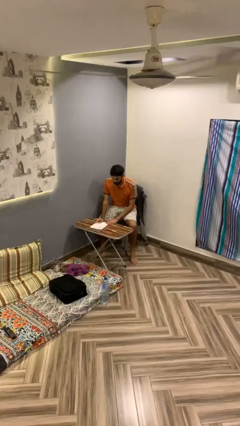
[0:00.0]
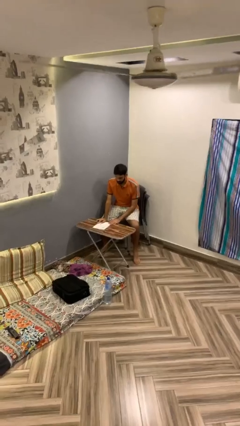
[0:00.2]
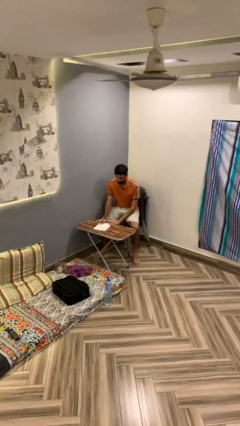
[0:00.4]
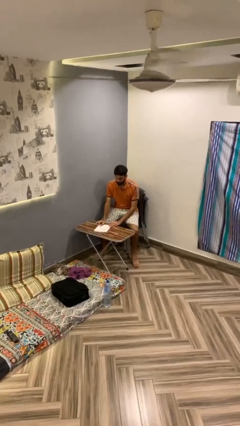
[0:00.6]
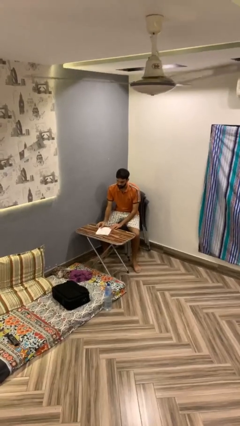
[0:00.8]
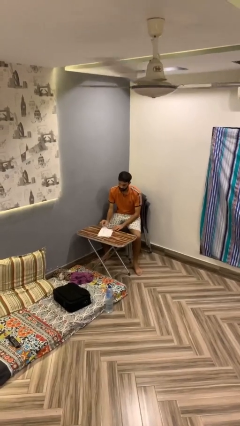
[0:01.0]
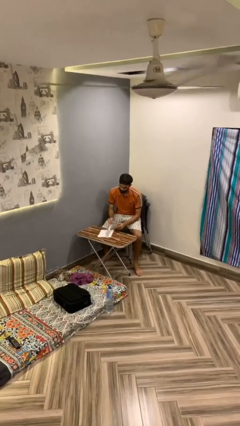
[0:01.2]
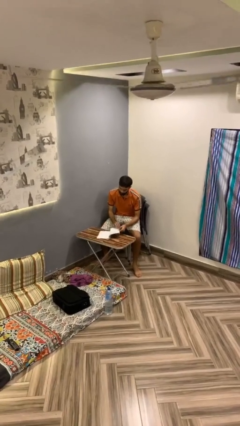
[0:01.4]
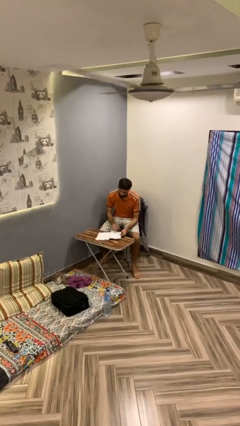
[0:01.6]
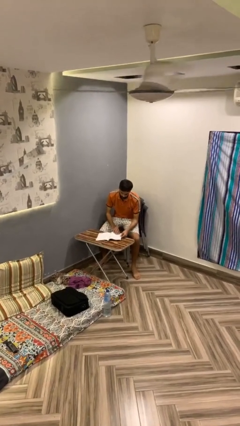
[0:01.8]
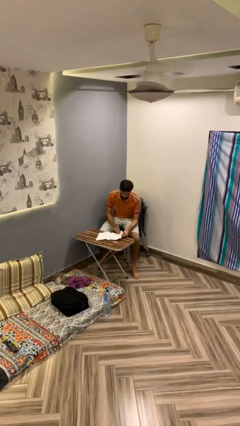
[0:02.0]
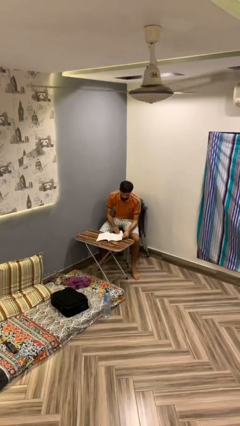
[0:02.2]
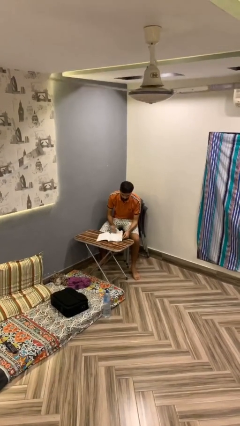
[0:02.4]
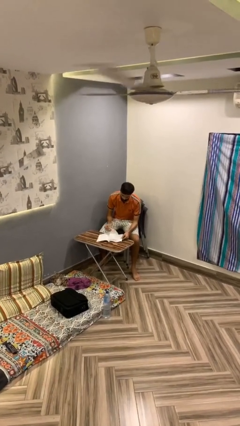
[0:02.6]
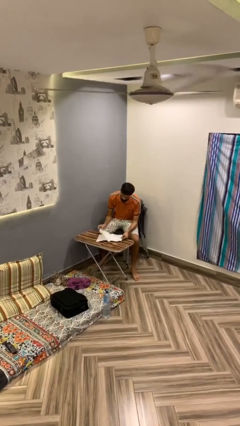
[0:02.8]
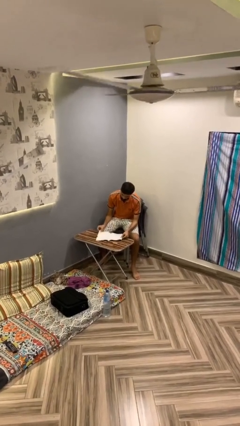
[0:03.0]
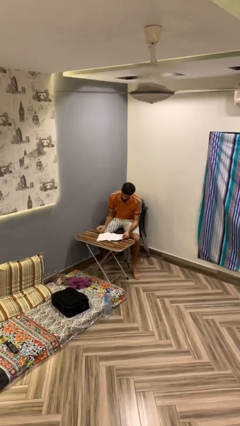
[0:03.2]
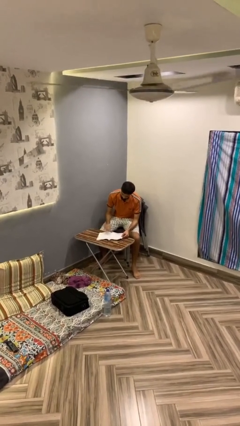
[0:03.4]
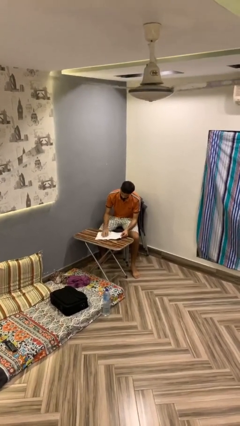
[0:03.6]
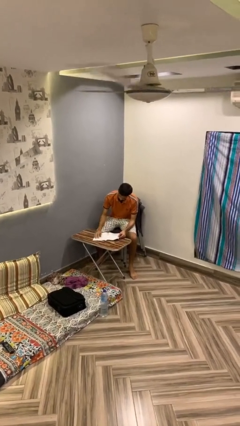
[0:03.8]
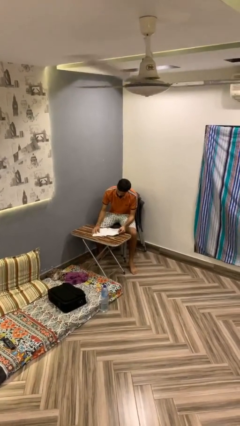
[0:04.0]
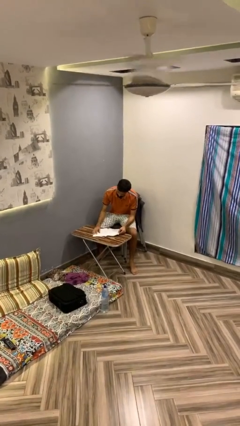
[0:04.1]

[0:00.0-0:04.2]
person reads document

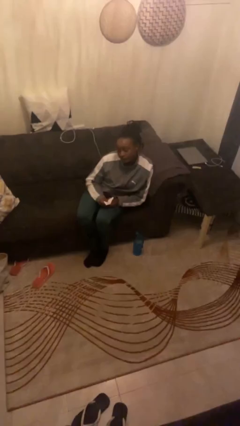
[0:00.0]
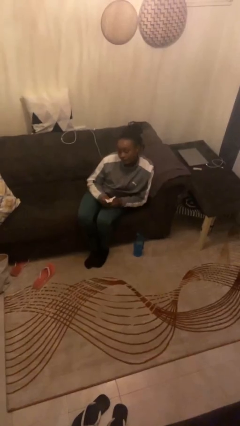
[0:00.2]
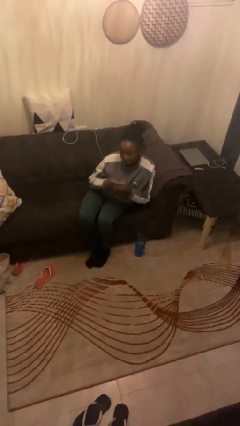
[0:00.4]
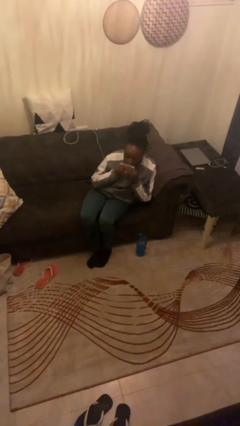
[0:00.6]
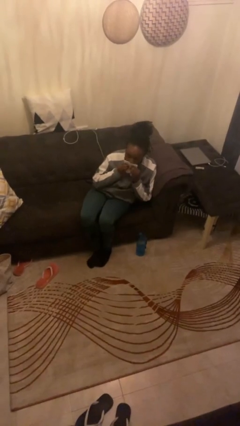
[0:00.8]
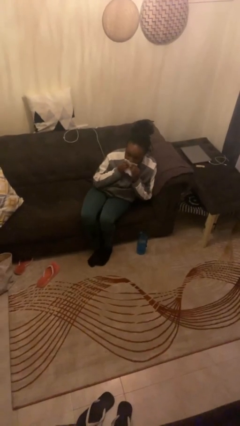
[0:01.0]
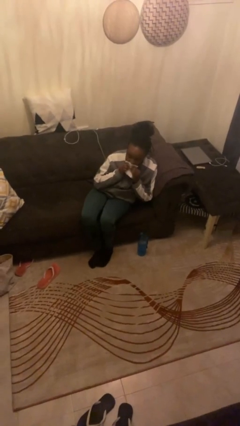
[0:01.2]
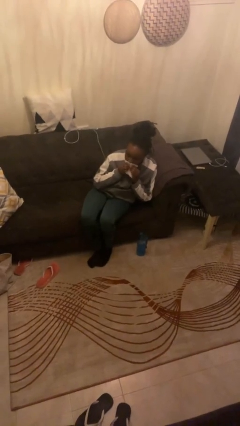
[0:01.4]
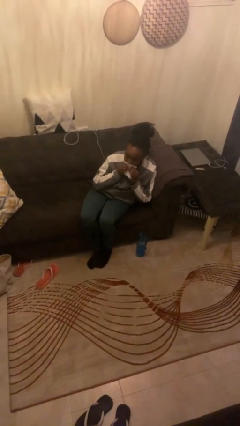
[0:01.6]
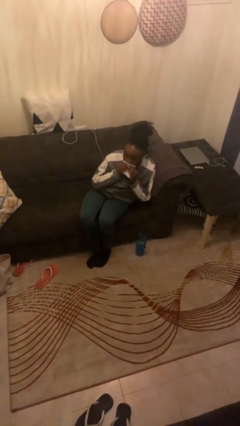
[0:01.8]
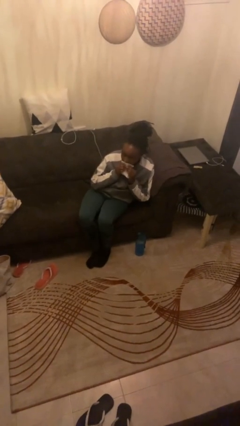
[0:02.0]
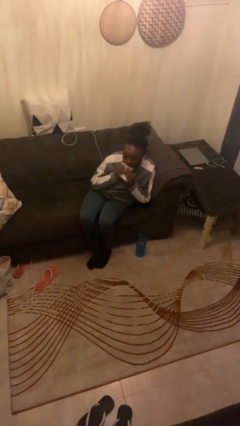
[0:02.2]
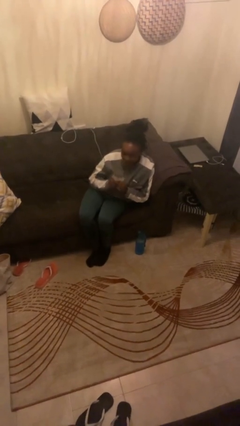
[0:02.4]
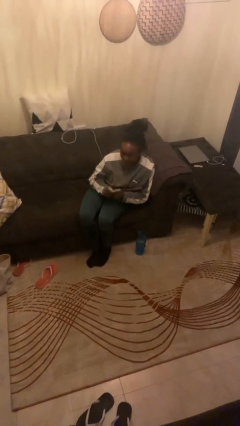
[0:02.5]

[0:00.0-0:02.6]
person wipes mouth with napkin

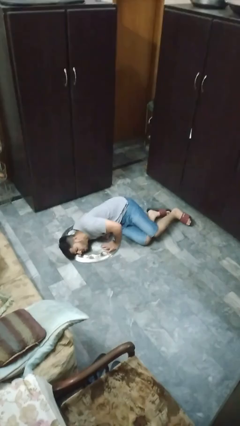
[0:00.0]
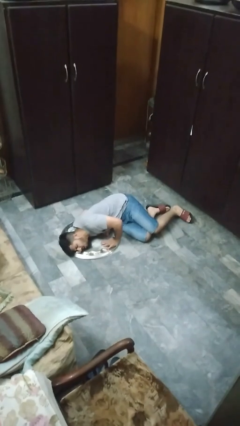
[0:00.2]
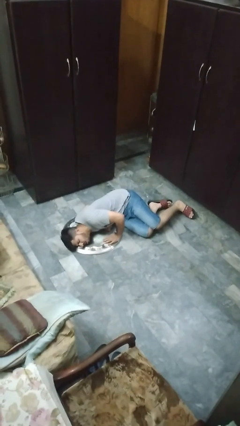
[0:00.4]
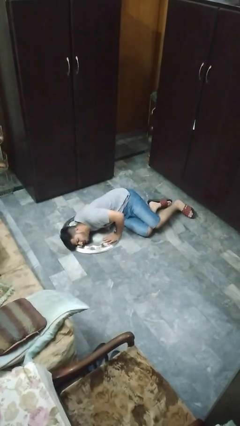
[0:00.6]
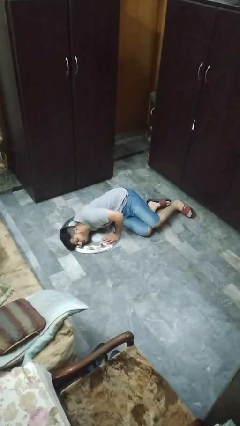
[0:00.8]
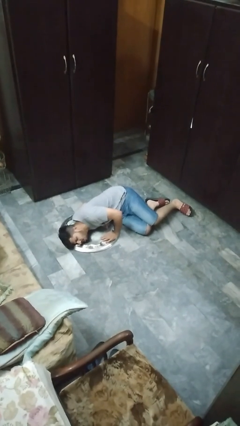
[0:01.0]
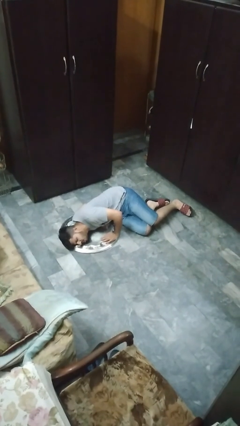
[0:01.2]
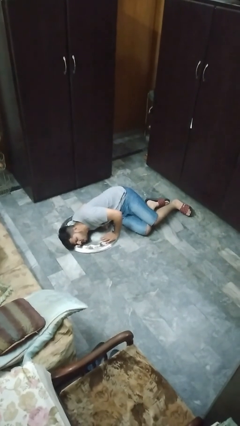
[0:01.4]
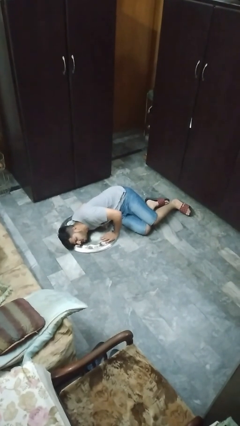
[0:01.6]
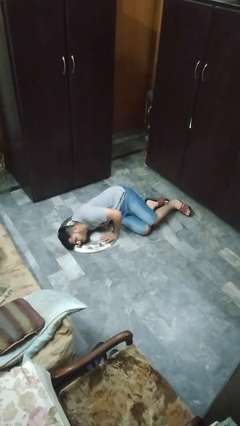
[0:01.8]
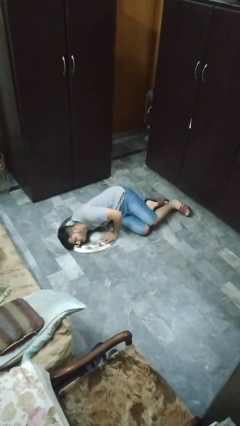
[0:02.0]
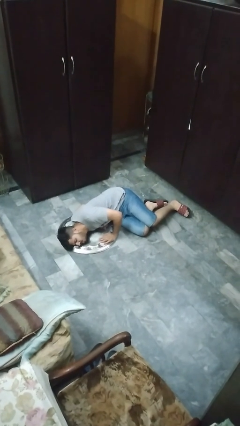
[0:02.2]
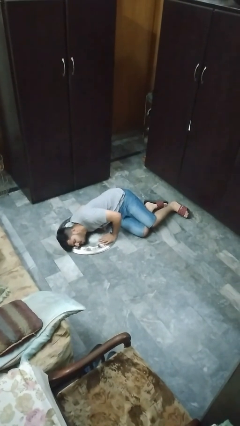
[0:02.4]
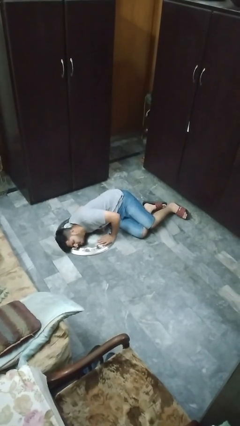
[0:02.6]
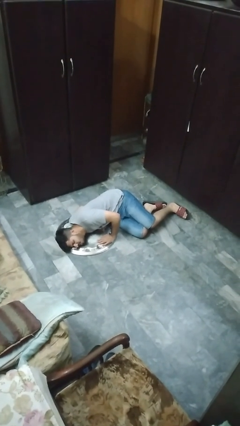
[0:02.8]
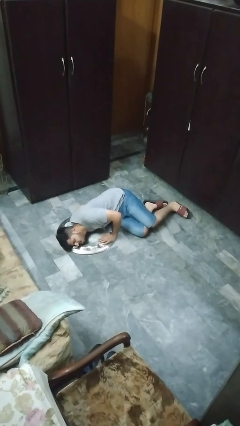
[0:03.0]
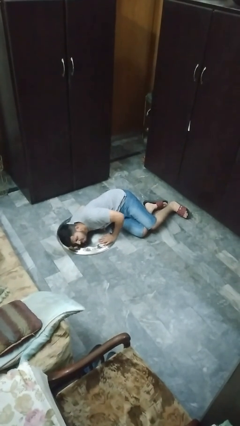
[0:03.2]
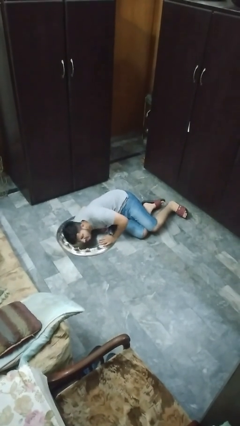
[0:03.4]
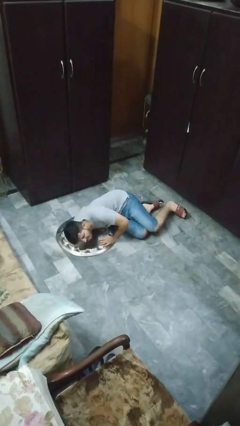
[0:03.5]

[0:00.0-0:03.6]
person lies down on floor

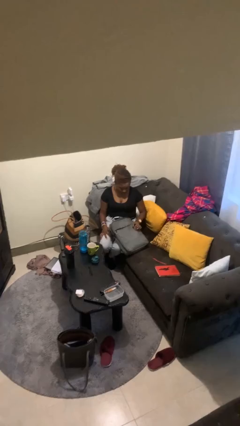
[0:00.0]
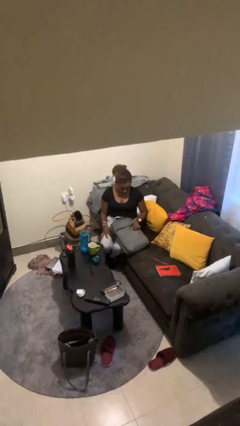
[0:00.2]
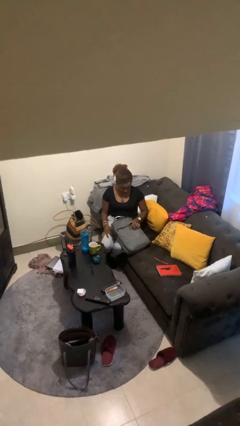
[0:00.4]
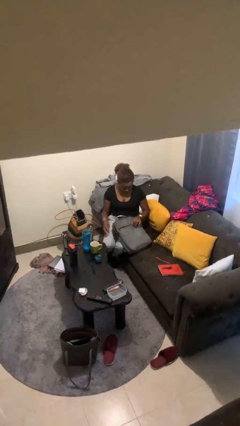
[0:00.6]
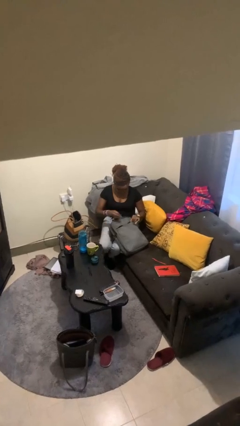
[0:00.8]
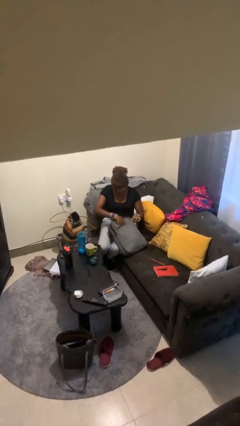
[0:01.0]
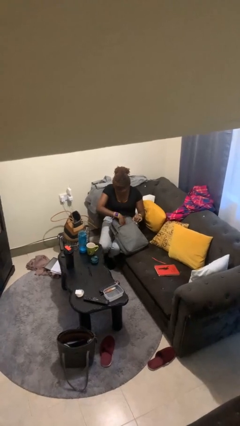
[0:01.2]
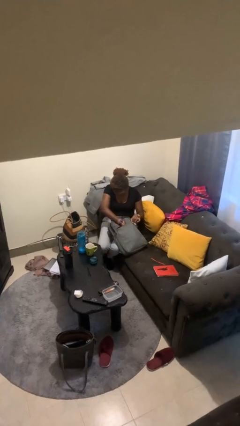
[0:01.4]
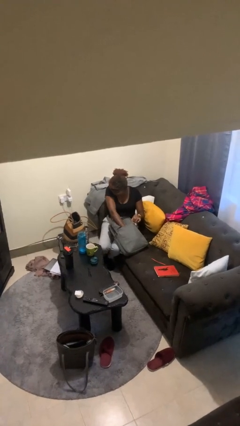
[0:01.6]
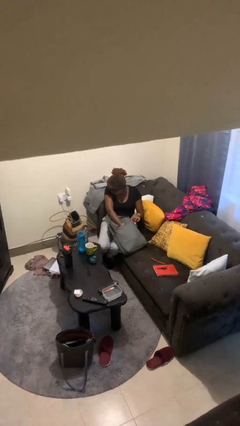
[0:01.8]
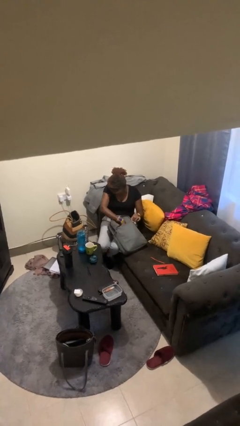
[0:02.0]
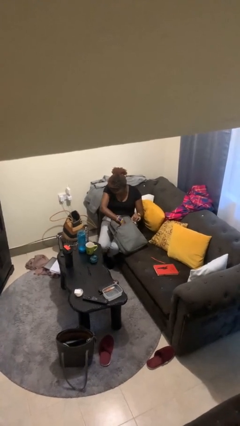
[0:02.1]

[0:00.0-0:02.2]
person searches in backpack

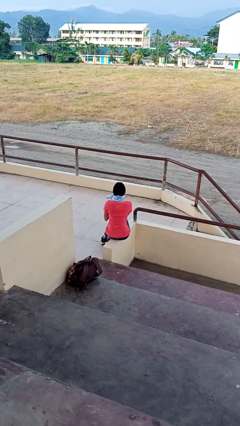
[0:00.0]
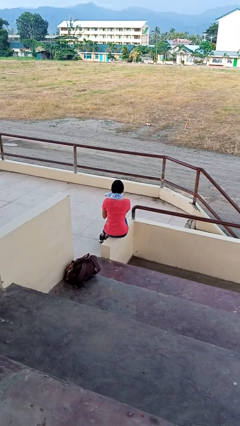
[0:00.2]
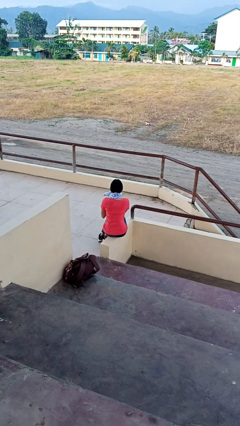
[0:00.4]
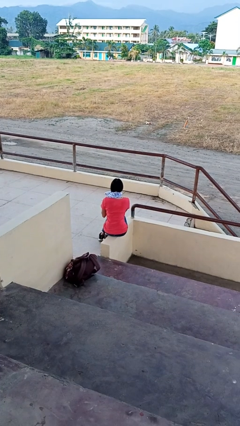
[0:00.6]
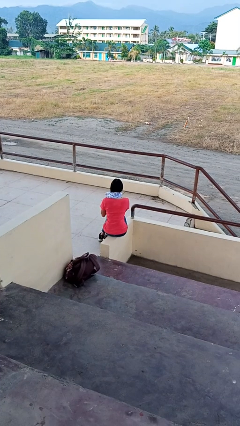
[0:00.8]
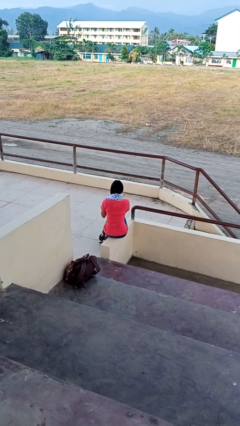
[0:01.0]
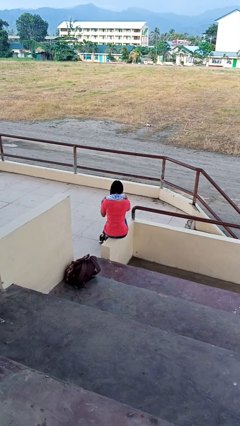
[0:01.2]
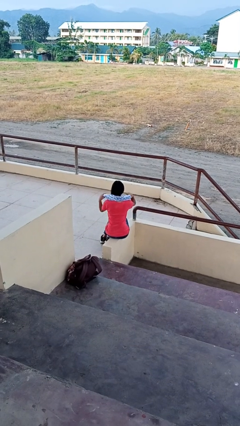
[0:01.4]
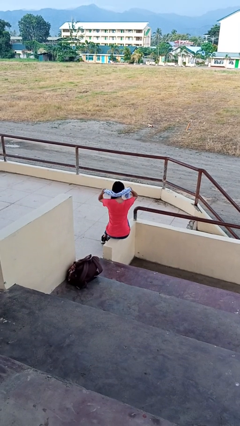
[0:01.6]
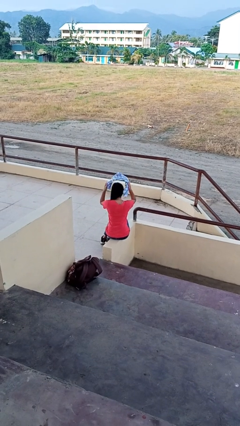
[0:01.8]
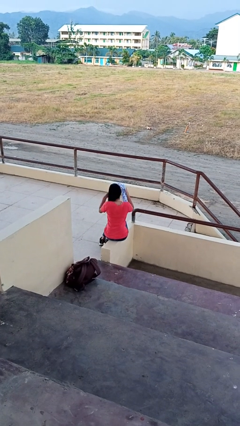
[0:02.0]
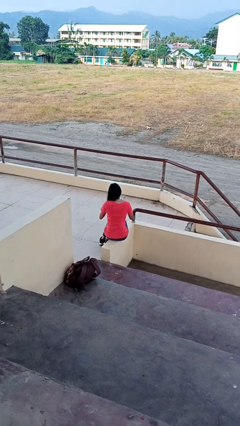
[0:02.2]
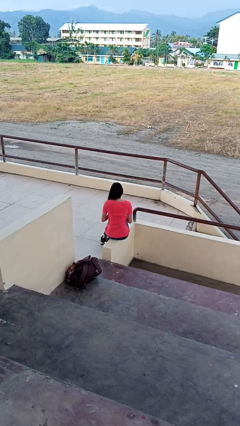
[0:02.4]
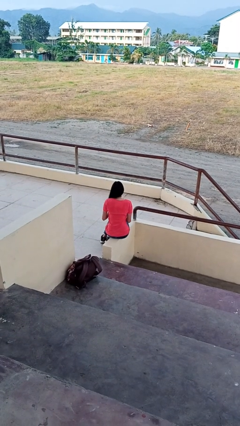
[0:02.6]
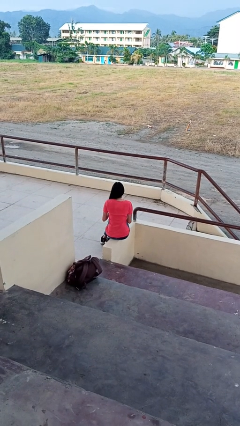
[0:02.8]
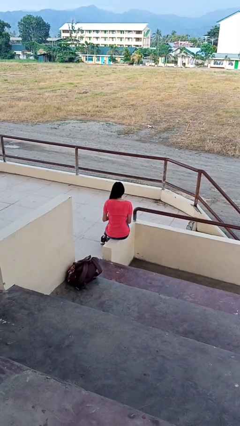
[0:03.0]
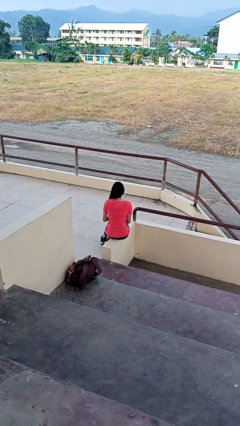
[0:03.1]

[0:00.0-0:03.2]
person takes off scarf

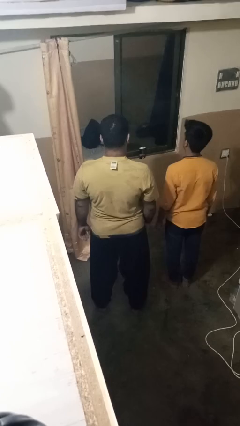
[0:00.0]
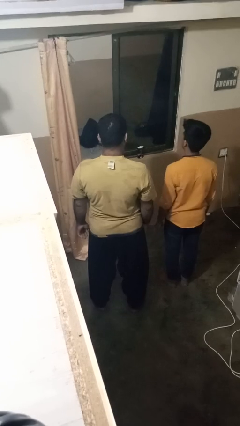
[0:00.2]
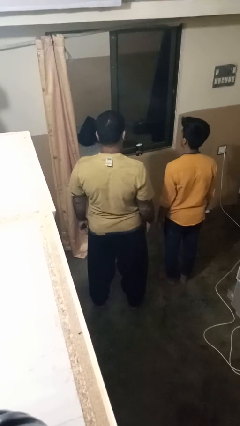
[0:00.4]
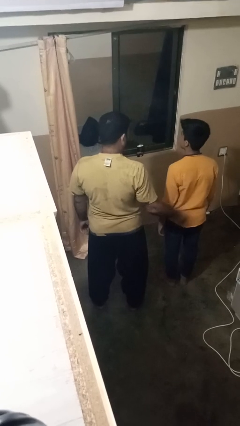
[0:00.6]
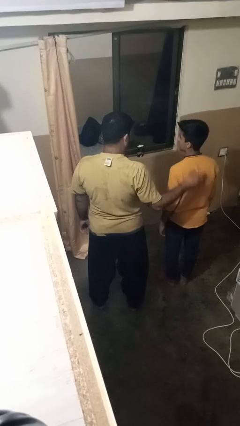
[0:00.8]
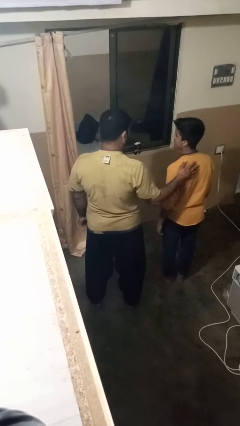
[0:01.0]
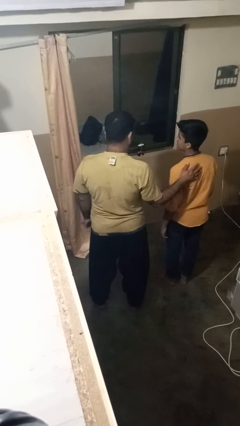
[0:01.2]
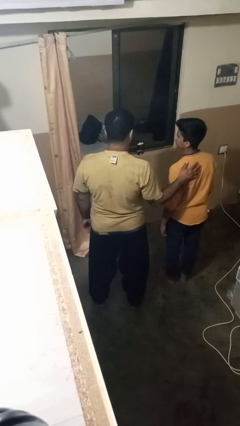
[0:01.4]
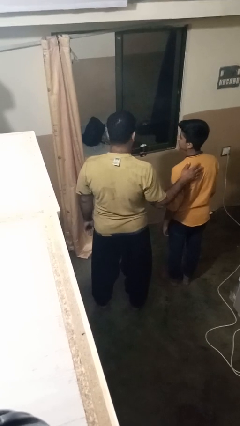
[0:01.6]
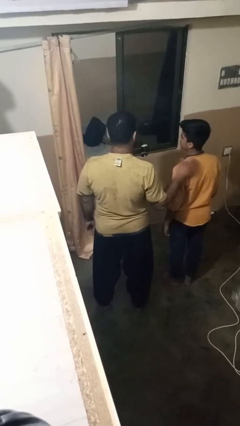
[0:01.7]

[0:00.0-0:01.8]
person touches back of person
